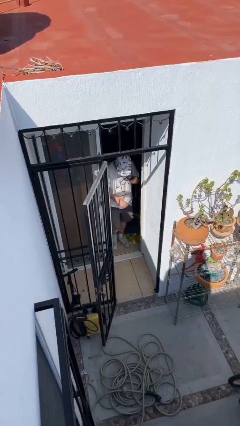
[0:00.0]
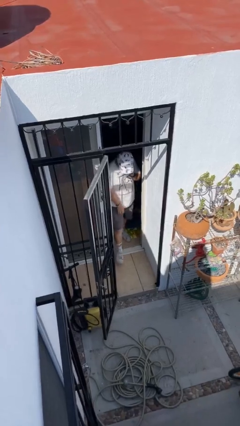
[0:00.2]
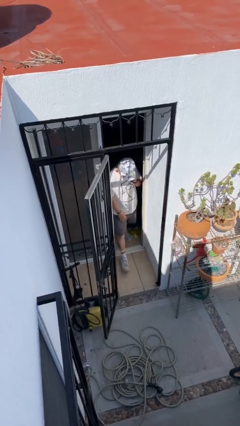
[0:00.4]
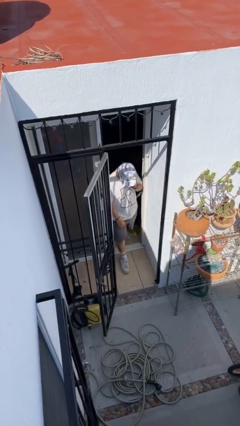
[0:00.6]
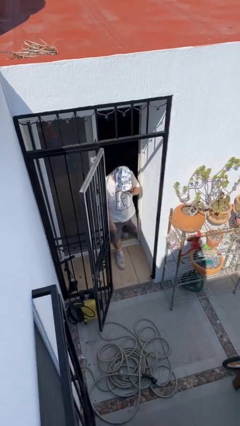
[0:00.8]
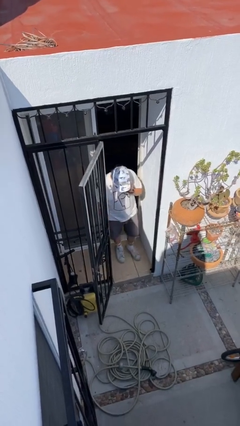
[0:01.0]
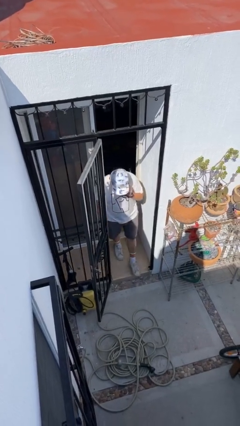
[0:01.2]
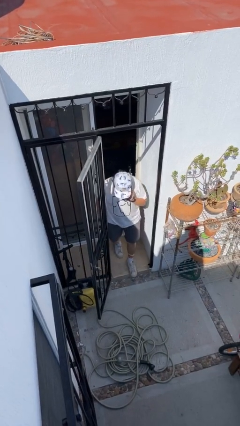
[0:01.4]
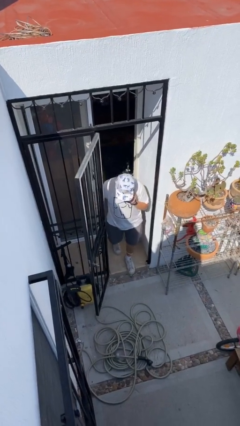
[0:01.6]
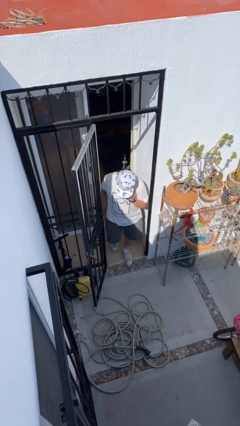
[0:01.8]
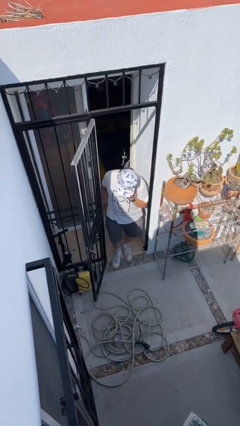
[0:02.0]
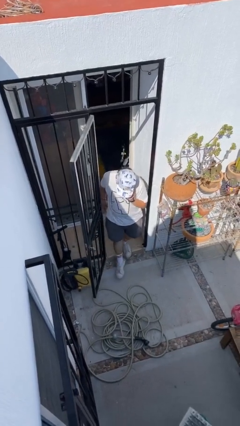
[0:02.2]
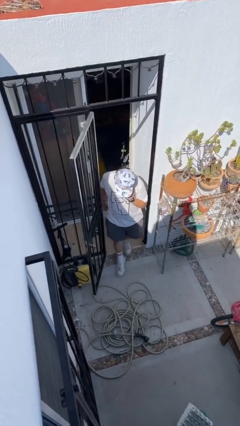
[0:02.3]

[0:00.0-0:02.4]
person enters scene through structure

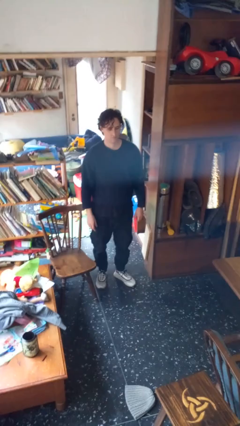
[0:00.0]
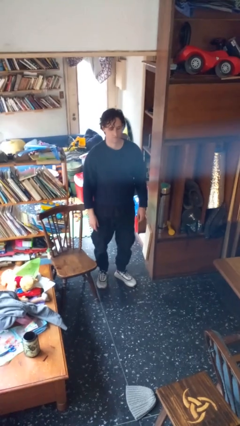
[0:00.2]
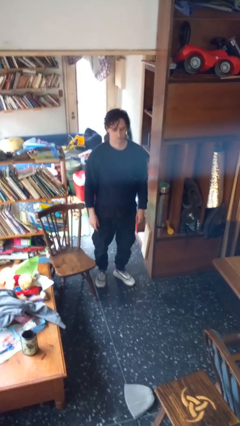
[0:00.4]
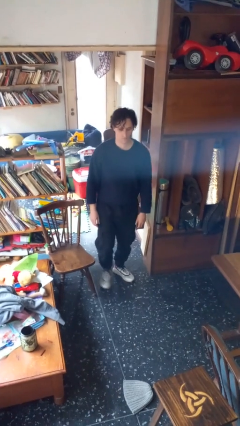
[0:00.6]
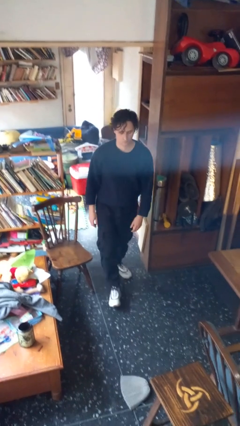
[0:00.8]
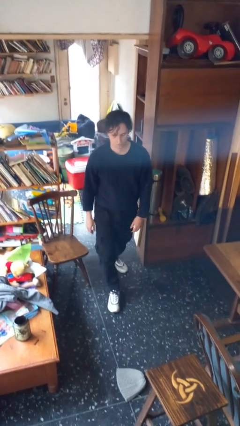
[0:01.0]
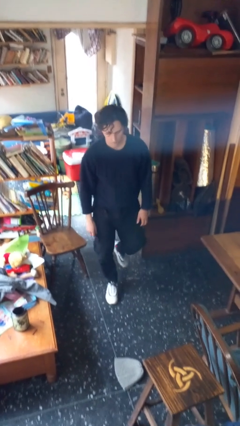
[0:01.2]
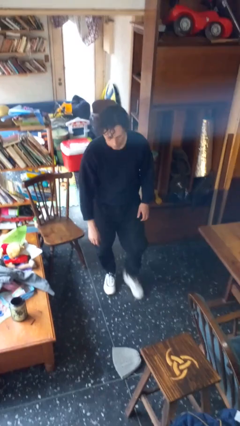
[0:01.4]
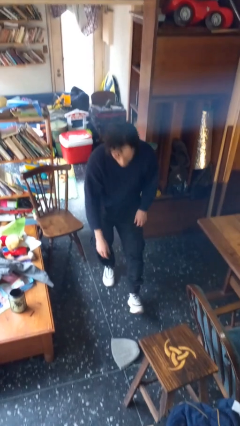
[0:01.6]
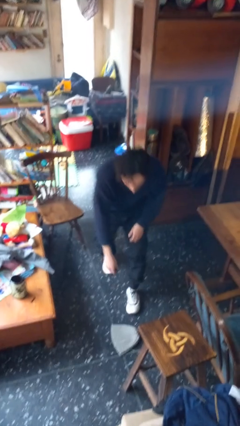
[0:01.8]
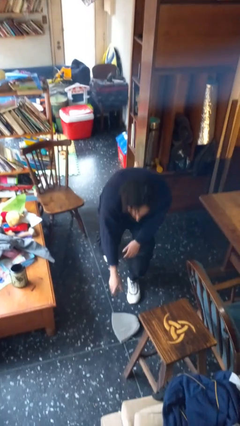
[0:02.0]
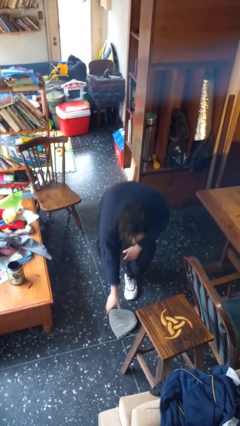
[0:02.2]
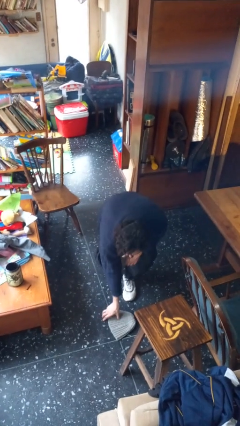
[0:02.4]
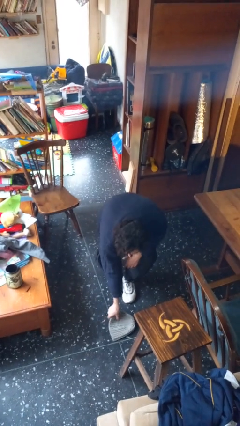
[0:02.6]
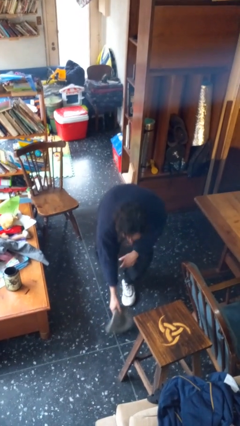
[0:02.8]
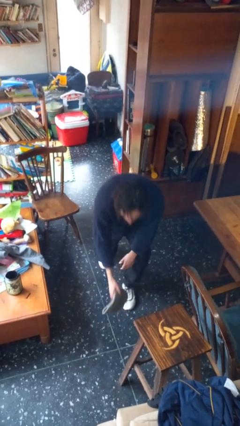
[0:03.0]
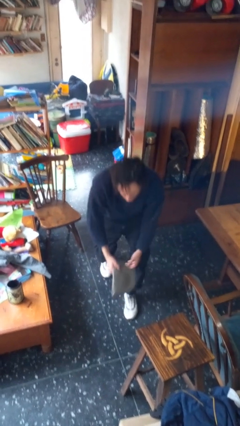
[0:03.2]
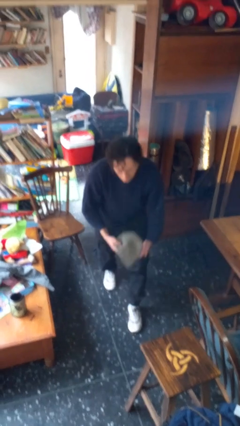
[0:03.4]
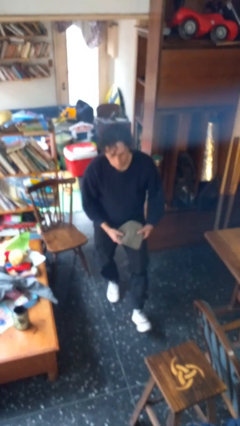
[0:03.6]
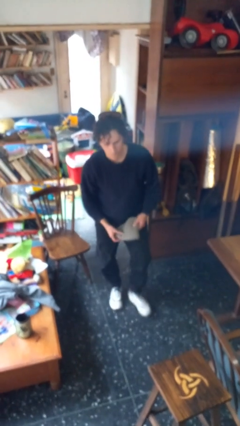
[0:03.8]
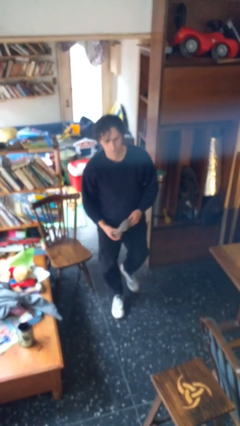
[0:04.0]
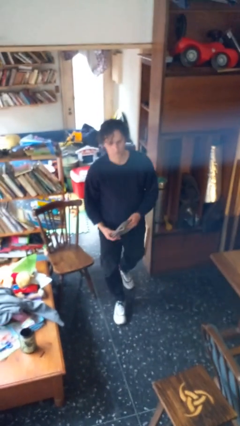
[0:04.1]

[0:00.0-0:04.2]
person picks up object from floor

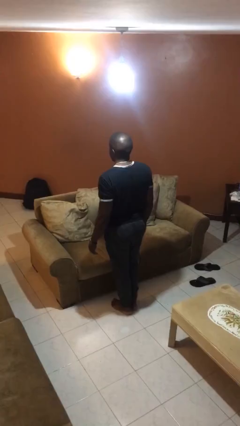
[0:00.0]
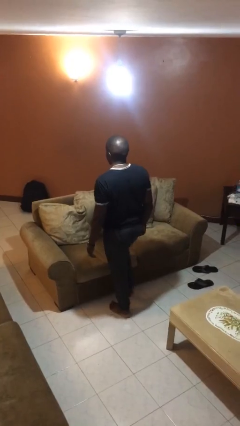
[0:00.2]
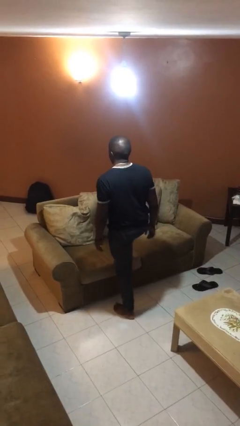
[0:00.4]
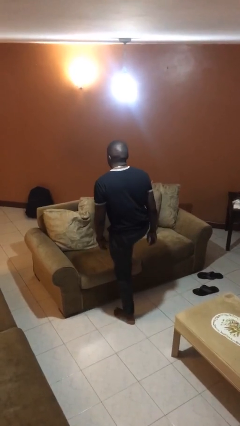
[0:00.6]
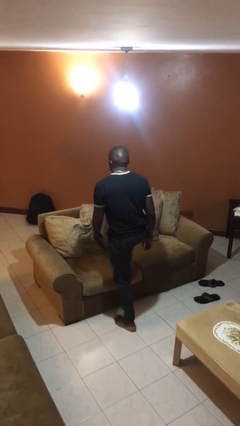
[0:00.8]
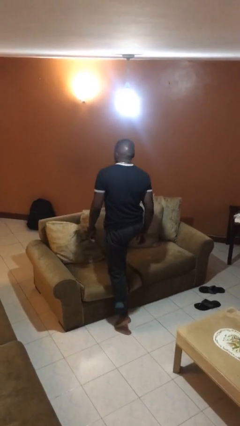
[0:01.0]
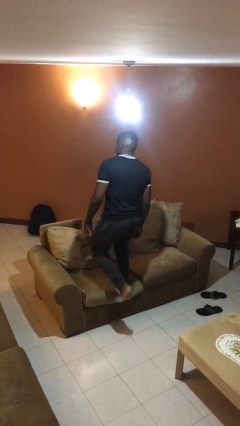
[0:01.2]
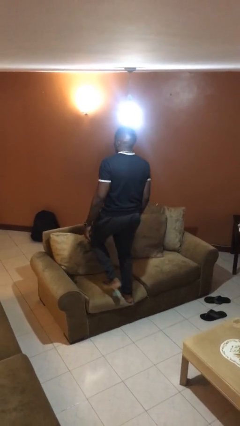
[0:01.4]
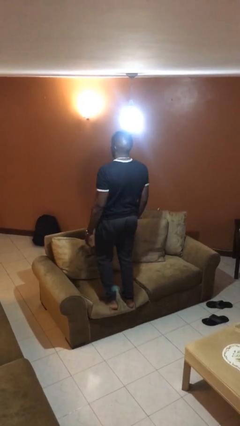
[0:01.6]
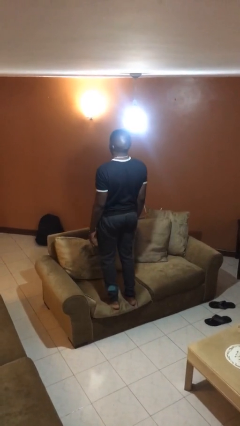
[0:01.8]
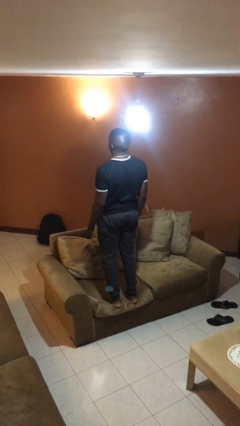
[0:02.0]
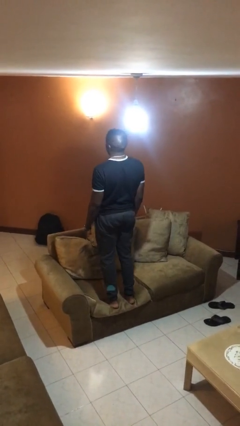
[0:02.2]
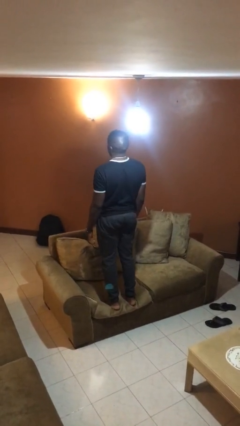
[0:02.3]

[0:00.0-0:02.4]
person climbs on couch

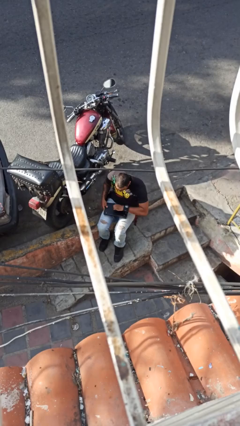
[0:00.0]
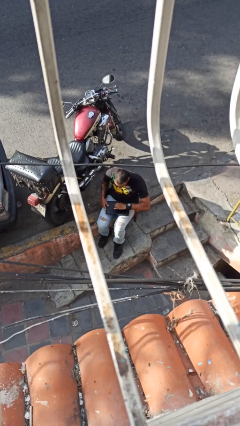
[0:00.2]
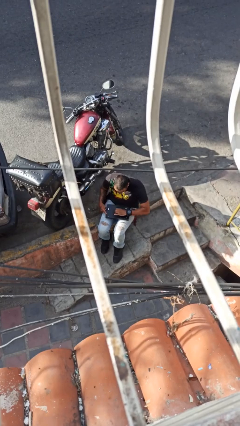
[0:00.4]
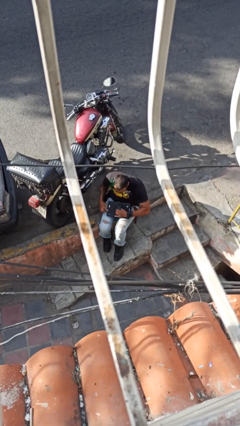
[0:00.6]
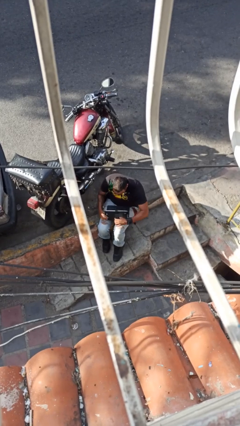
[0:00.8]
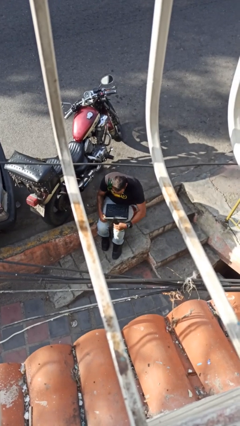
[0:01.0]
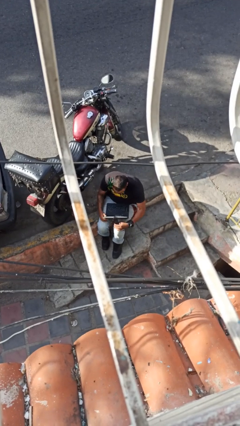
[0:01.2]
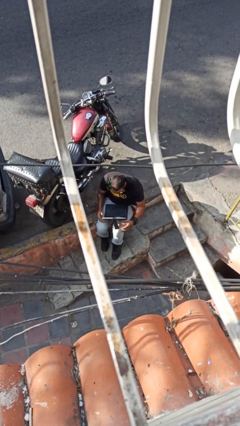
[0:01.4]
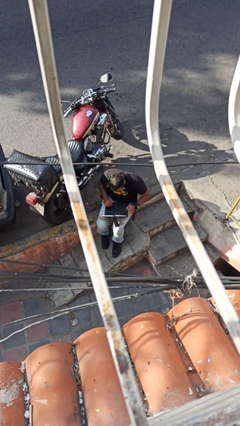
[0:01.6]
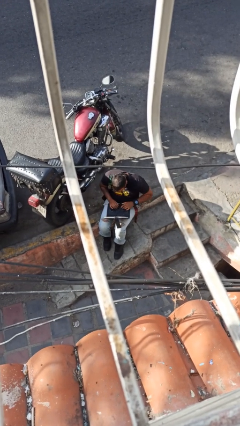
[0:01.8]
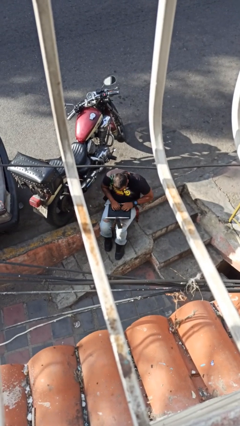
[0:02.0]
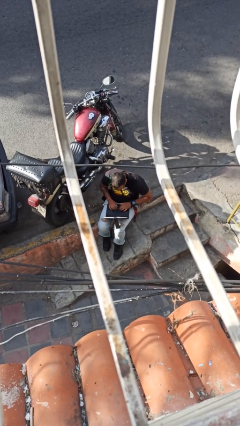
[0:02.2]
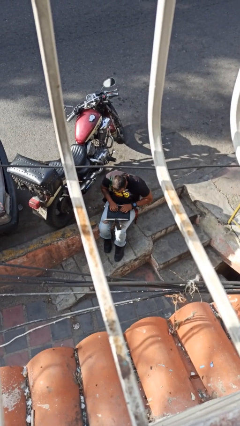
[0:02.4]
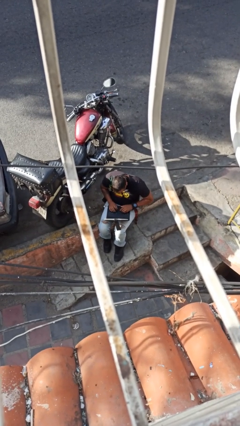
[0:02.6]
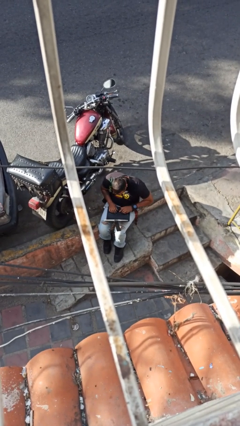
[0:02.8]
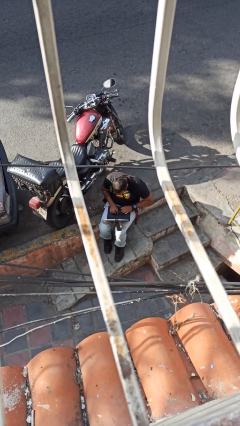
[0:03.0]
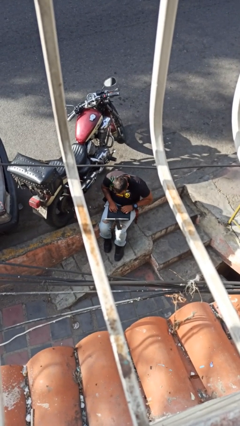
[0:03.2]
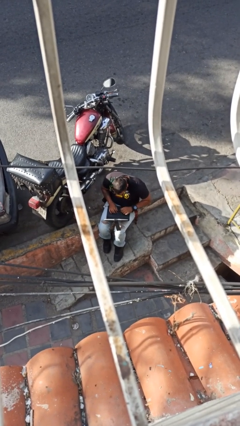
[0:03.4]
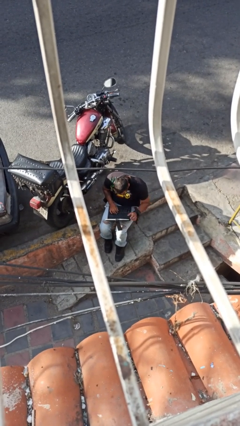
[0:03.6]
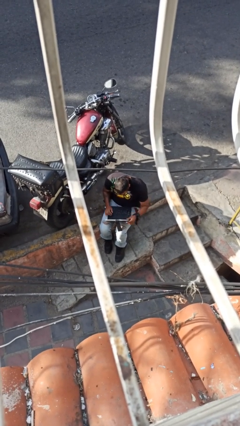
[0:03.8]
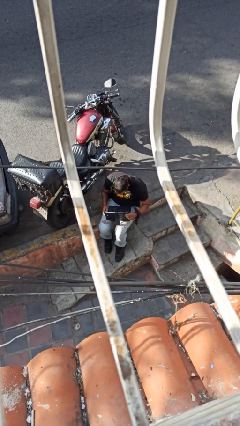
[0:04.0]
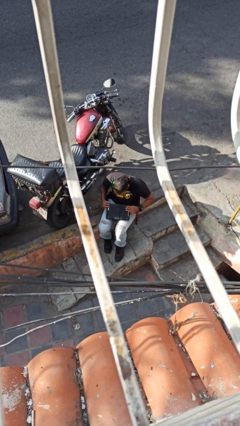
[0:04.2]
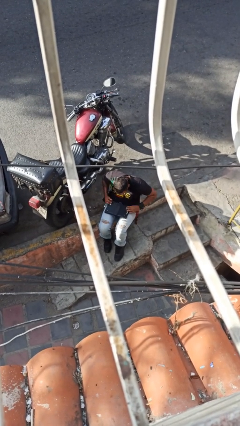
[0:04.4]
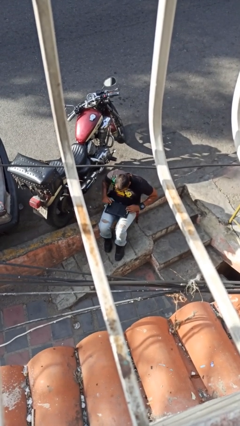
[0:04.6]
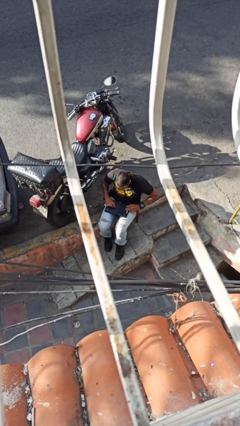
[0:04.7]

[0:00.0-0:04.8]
person interacts with laptop

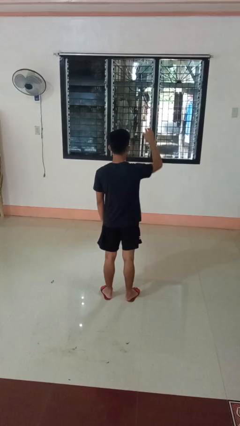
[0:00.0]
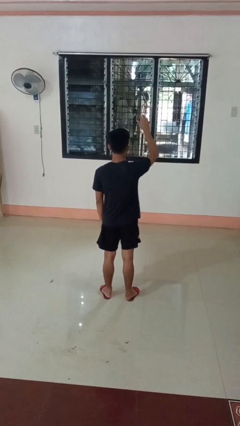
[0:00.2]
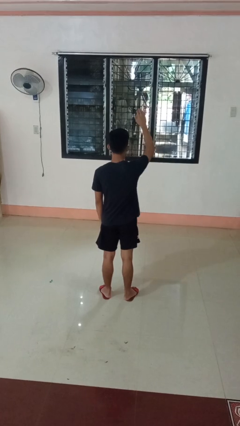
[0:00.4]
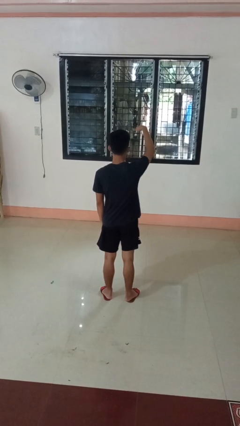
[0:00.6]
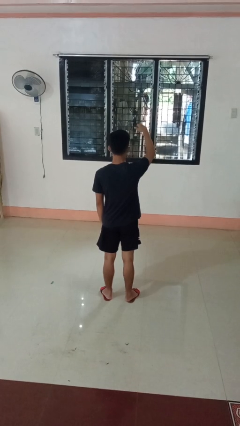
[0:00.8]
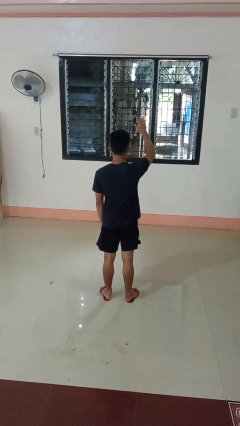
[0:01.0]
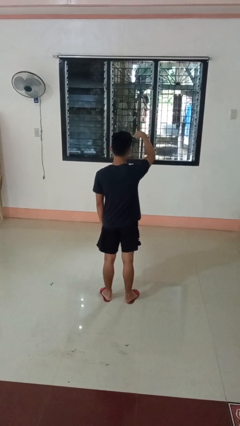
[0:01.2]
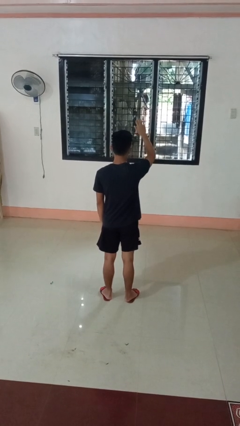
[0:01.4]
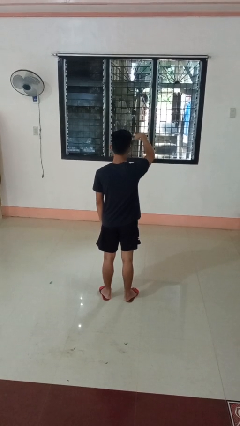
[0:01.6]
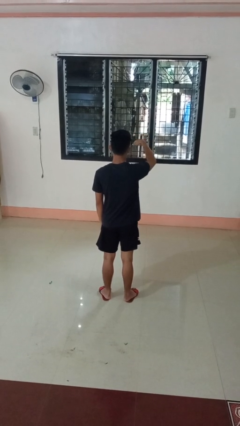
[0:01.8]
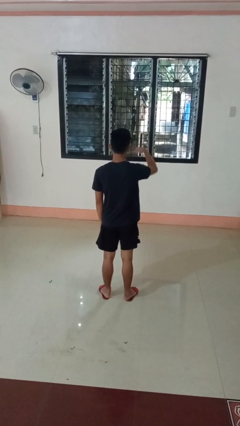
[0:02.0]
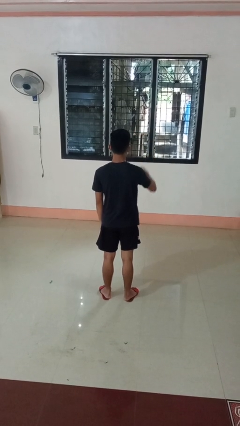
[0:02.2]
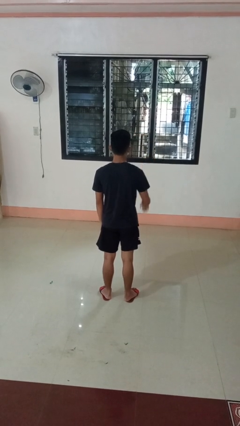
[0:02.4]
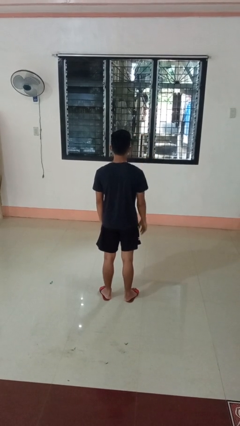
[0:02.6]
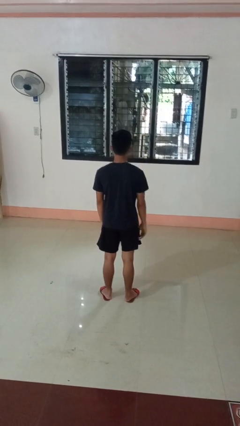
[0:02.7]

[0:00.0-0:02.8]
person gestures come here

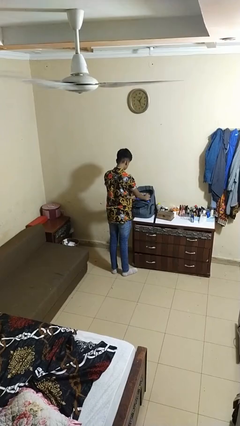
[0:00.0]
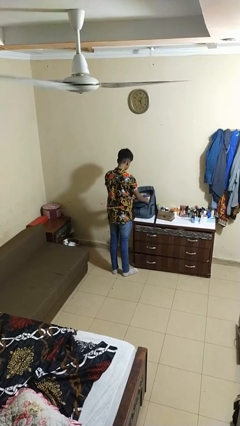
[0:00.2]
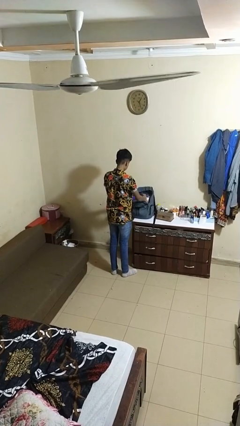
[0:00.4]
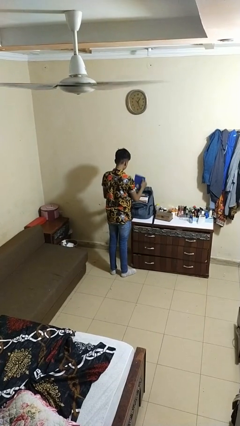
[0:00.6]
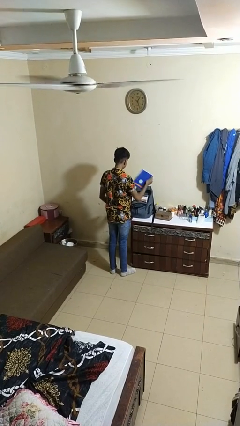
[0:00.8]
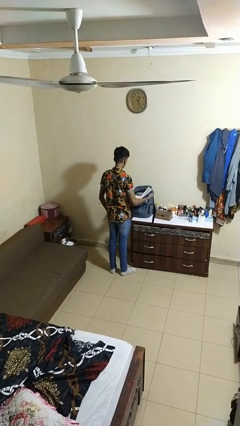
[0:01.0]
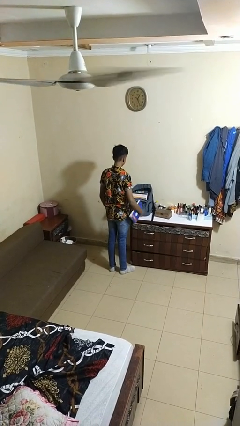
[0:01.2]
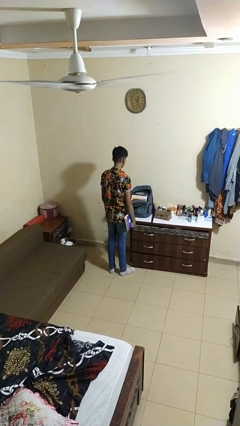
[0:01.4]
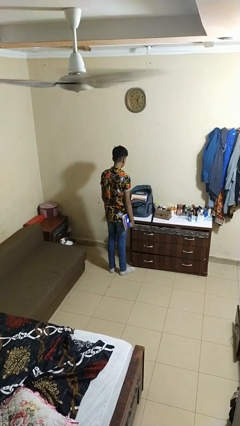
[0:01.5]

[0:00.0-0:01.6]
person takes object from backpack
